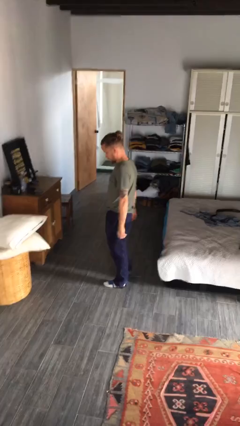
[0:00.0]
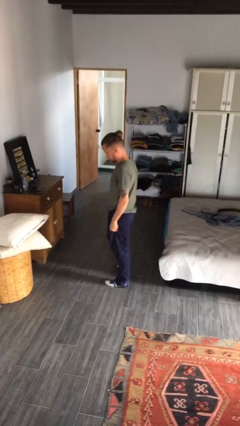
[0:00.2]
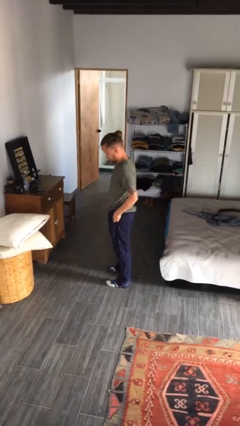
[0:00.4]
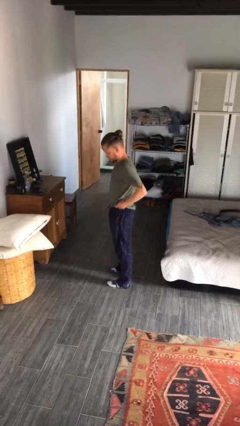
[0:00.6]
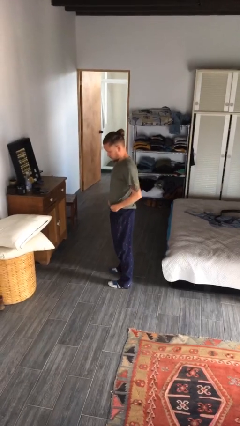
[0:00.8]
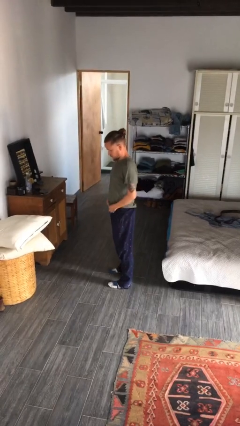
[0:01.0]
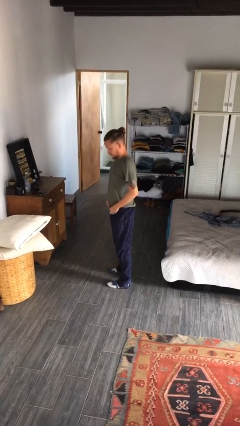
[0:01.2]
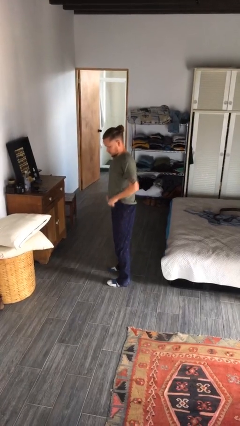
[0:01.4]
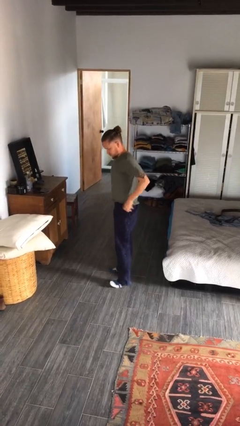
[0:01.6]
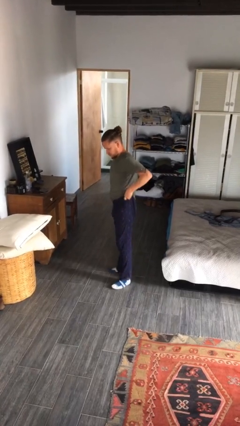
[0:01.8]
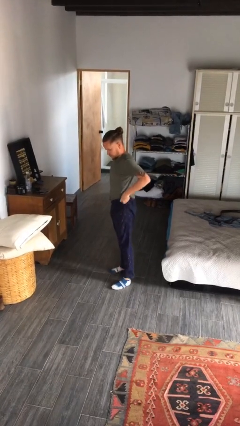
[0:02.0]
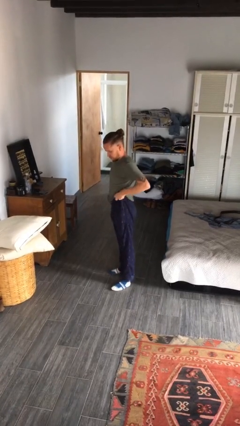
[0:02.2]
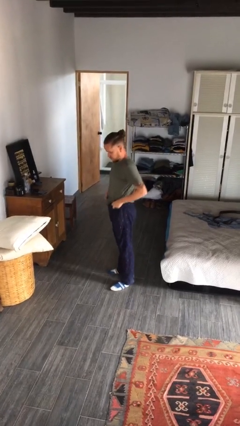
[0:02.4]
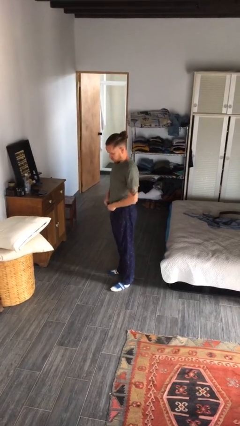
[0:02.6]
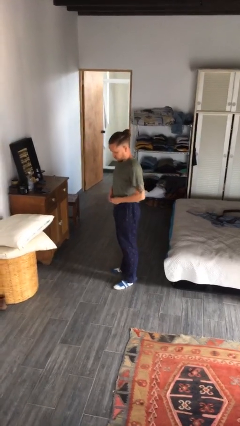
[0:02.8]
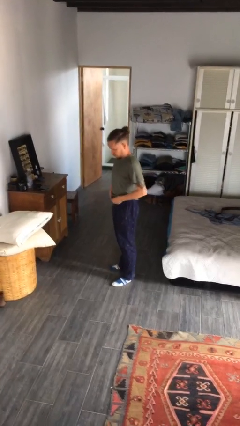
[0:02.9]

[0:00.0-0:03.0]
person hikes up pants

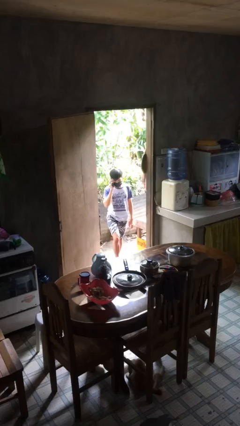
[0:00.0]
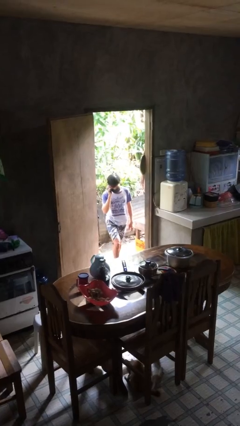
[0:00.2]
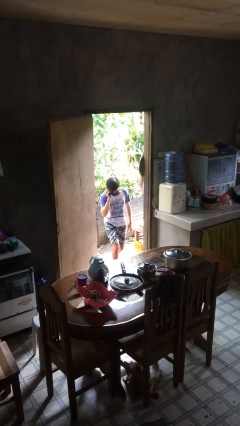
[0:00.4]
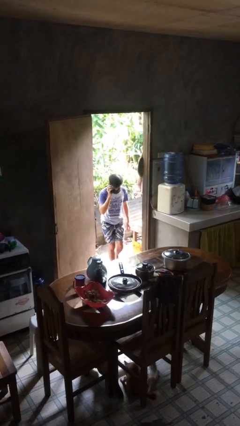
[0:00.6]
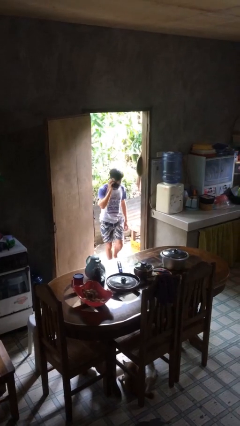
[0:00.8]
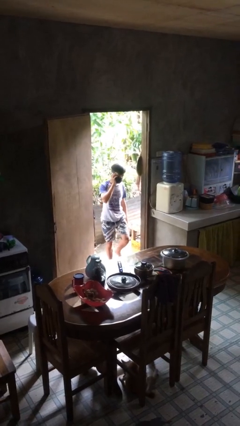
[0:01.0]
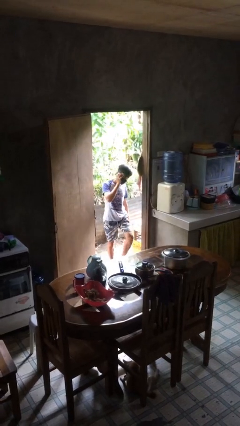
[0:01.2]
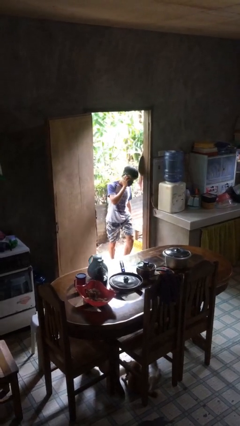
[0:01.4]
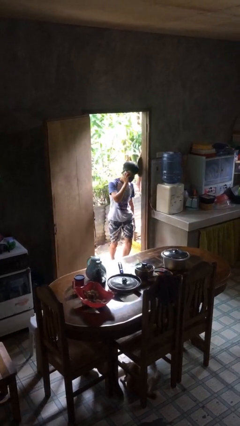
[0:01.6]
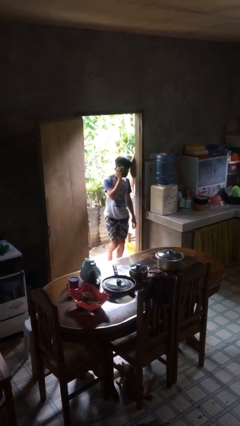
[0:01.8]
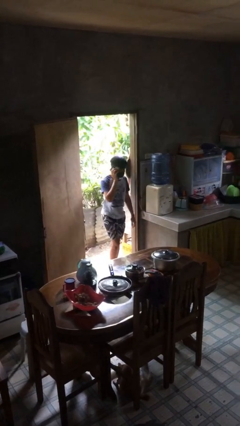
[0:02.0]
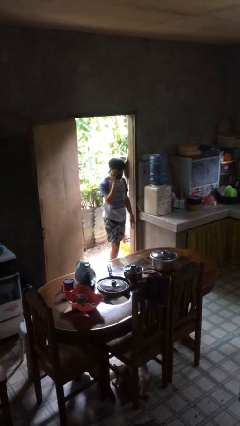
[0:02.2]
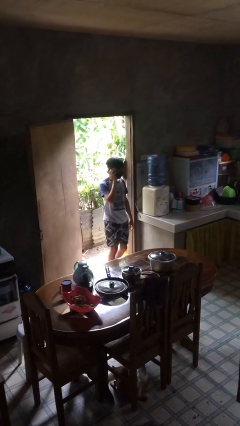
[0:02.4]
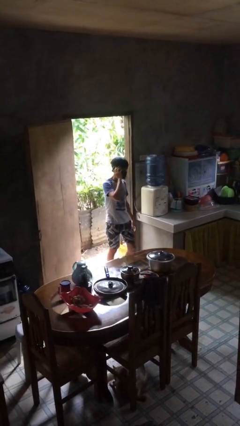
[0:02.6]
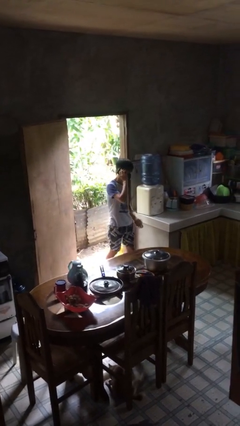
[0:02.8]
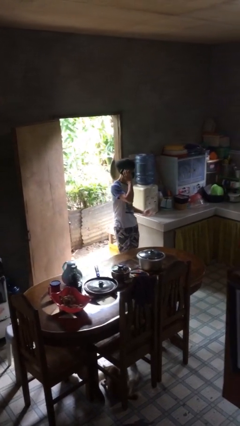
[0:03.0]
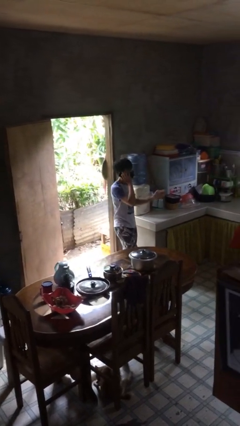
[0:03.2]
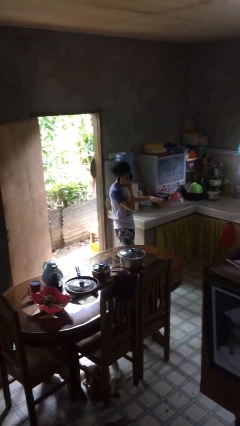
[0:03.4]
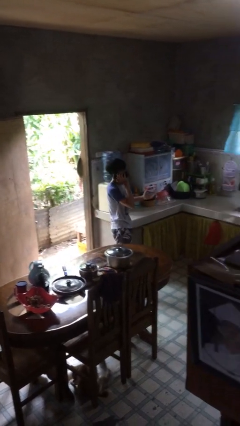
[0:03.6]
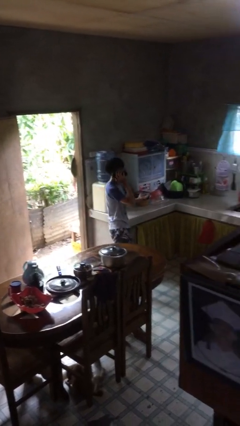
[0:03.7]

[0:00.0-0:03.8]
person enters scene through structure

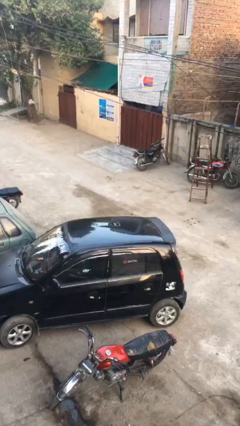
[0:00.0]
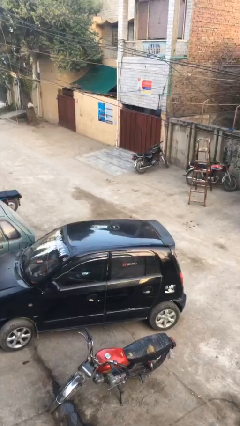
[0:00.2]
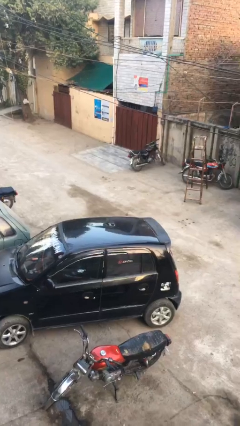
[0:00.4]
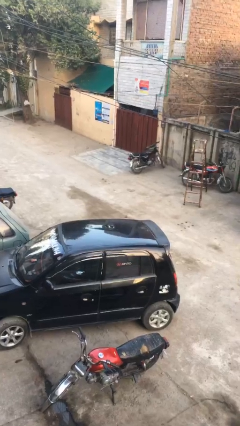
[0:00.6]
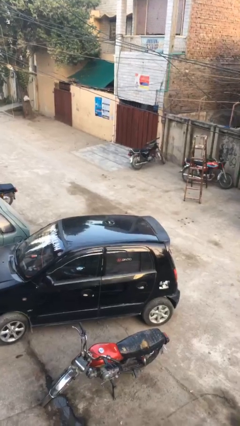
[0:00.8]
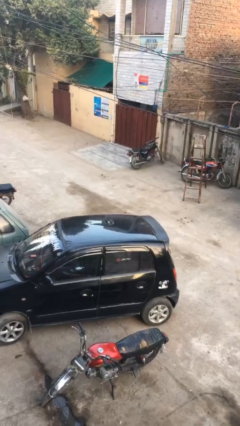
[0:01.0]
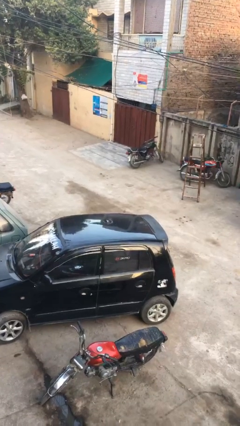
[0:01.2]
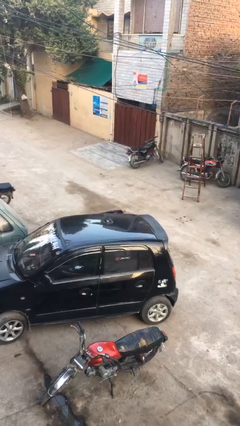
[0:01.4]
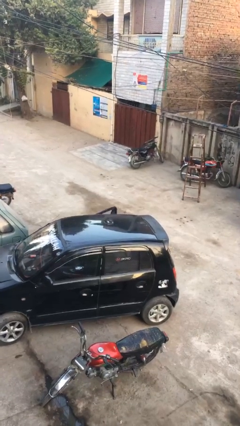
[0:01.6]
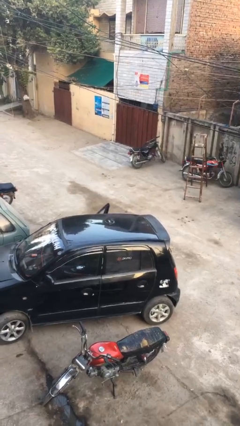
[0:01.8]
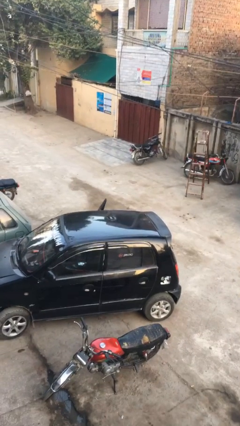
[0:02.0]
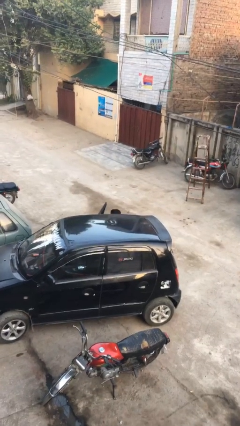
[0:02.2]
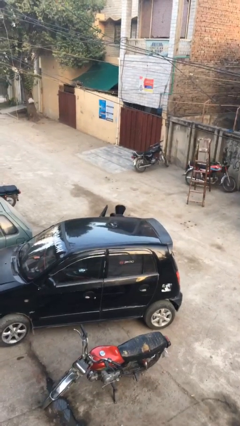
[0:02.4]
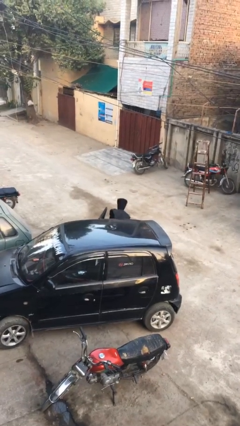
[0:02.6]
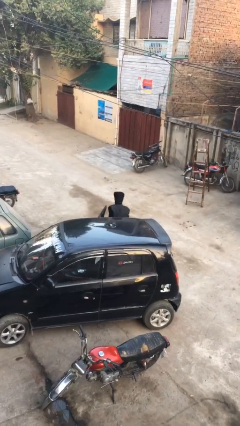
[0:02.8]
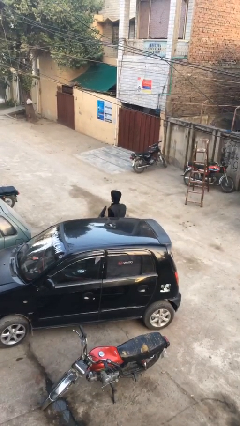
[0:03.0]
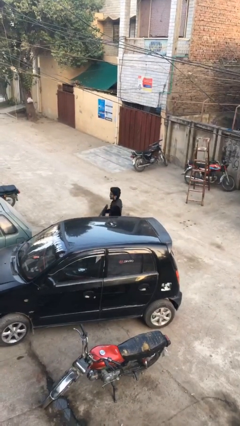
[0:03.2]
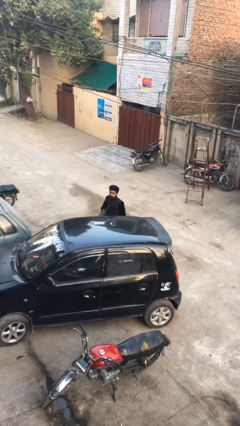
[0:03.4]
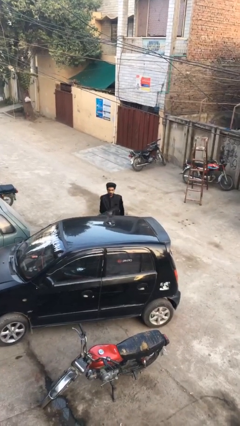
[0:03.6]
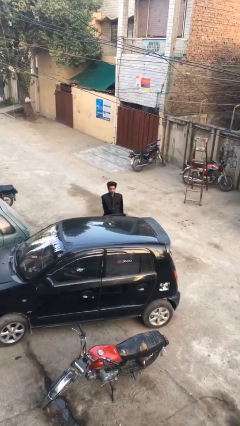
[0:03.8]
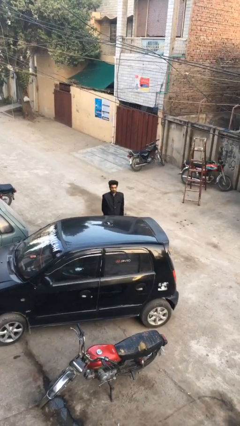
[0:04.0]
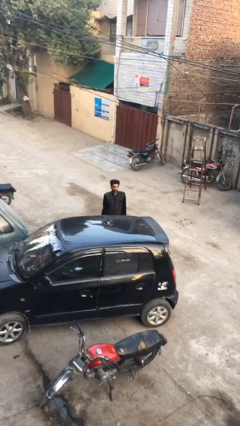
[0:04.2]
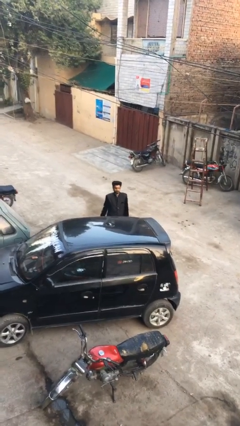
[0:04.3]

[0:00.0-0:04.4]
person exits car

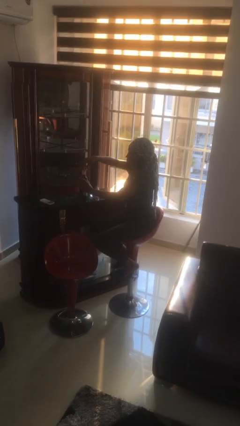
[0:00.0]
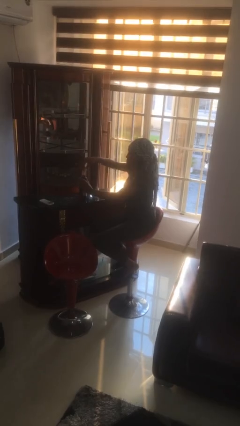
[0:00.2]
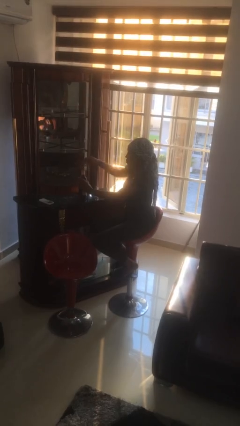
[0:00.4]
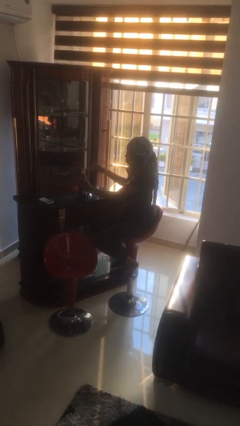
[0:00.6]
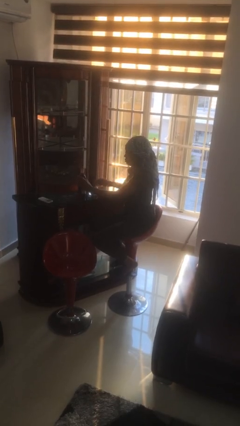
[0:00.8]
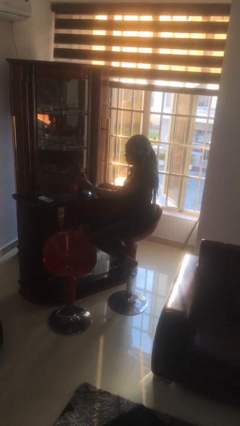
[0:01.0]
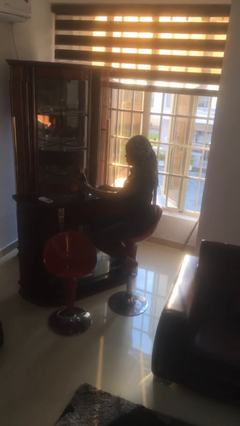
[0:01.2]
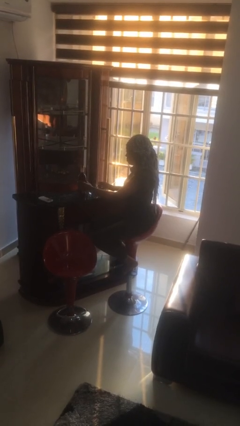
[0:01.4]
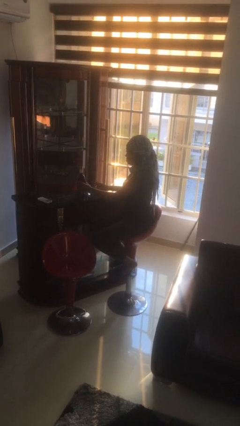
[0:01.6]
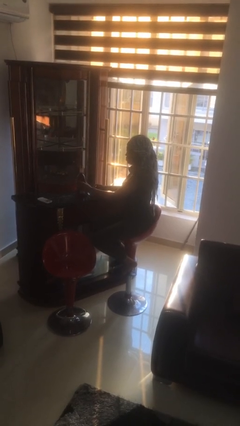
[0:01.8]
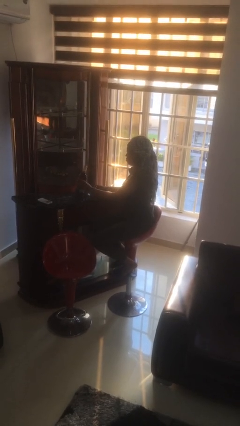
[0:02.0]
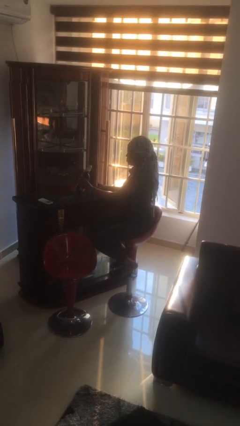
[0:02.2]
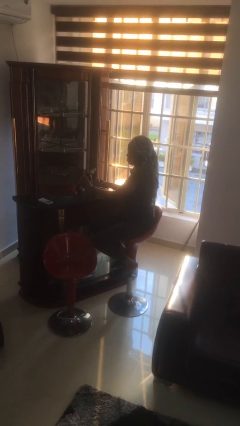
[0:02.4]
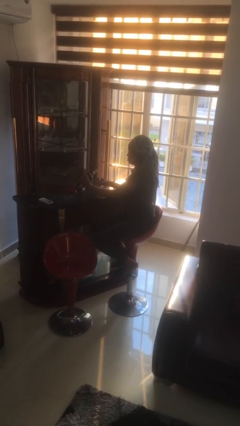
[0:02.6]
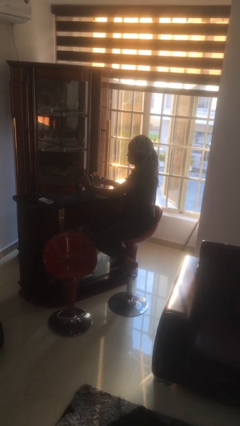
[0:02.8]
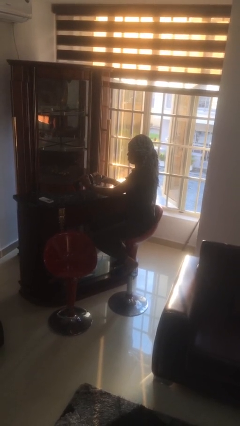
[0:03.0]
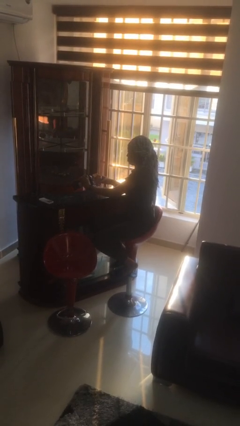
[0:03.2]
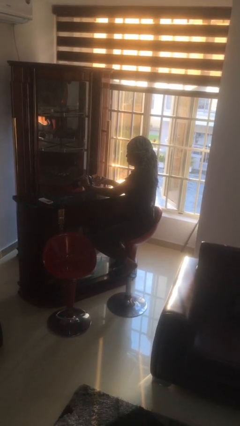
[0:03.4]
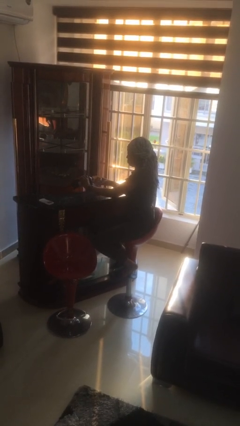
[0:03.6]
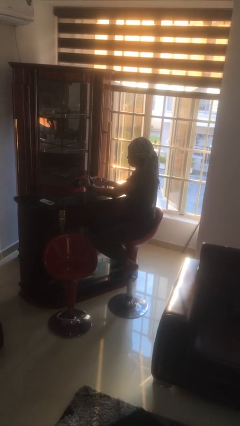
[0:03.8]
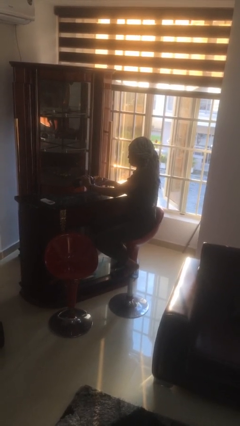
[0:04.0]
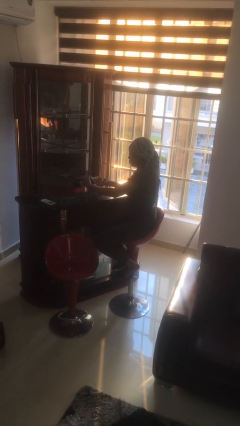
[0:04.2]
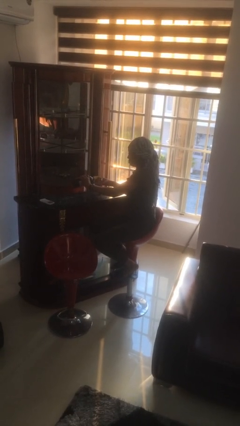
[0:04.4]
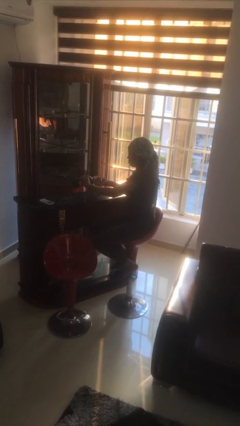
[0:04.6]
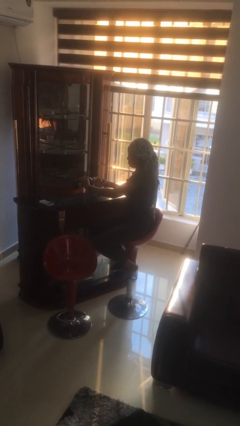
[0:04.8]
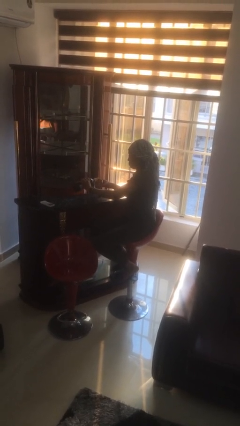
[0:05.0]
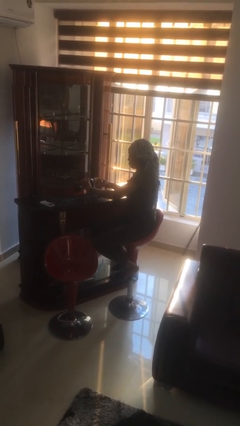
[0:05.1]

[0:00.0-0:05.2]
person pours liquid into cup

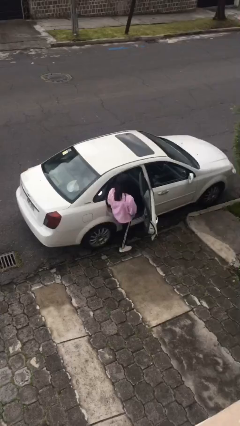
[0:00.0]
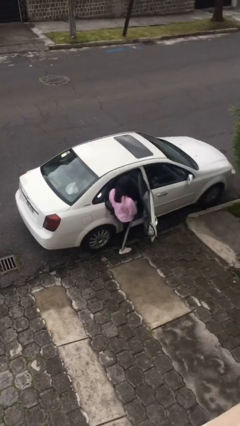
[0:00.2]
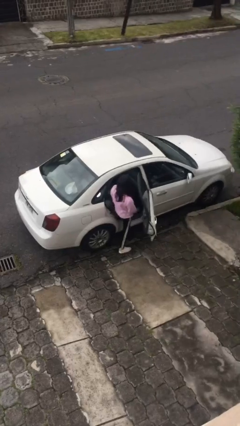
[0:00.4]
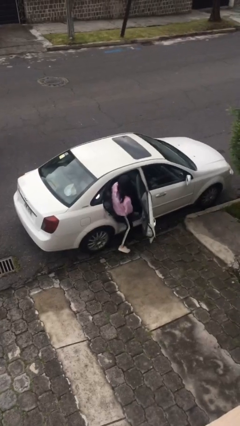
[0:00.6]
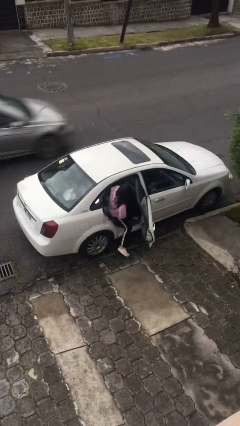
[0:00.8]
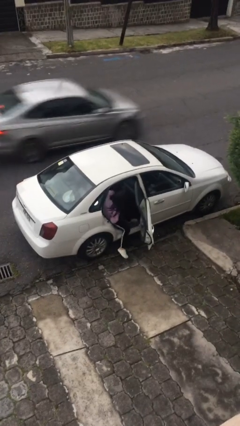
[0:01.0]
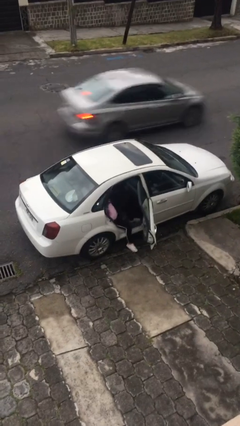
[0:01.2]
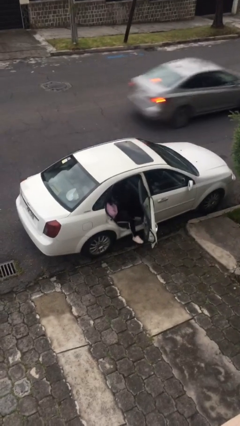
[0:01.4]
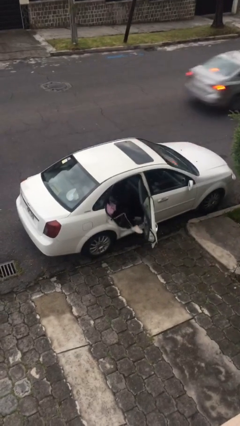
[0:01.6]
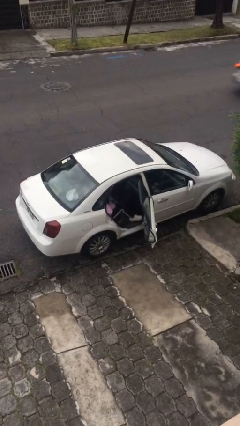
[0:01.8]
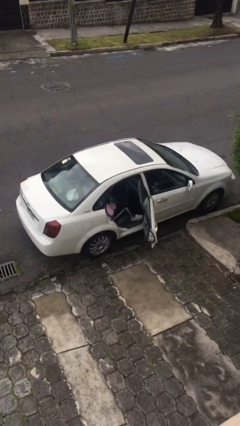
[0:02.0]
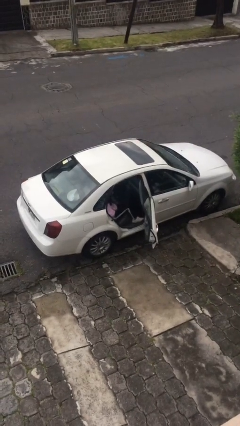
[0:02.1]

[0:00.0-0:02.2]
person enters car
